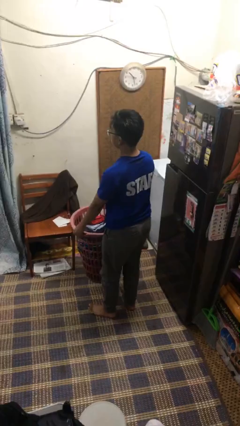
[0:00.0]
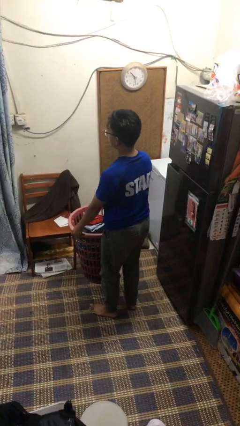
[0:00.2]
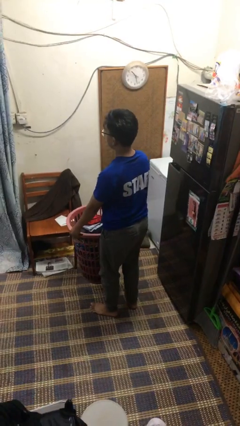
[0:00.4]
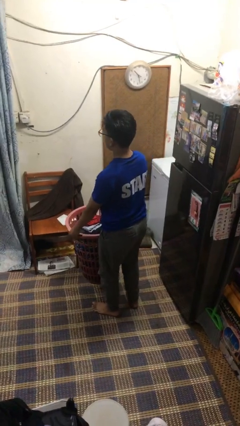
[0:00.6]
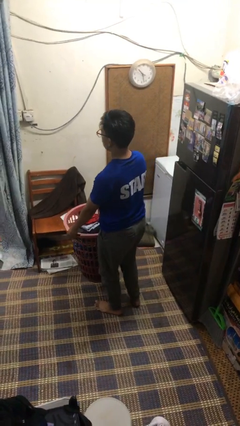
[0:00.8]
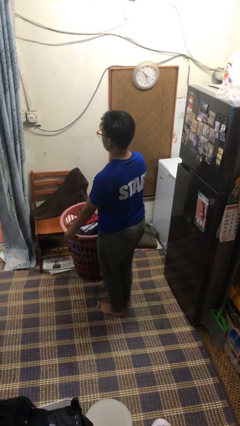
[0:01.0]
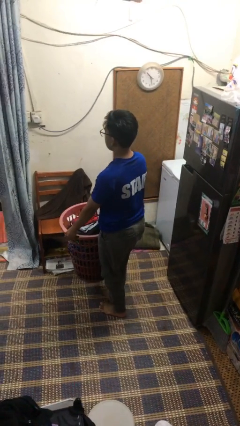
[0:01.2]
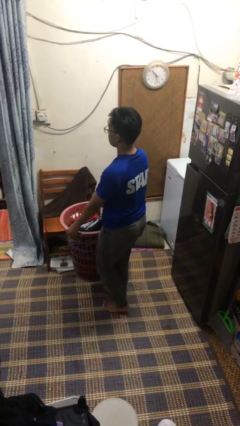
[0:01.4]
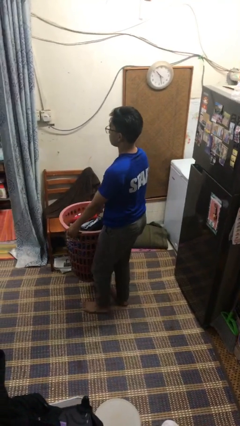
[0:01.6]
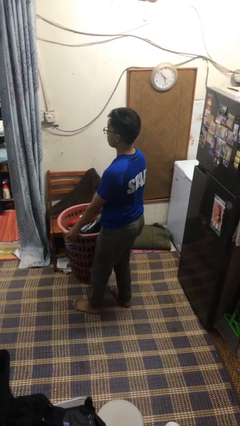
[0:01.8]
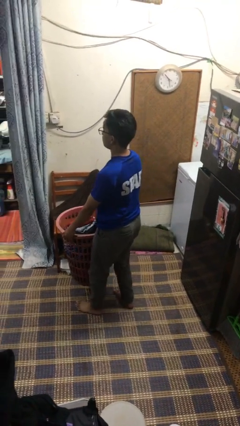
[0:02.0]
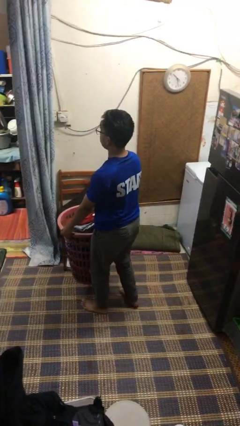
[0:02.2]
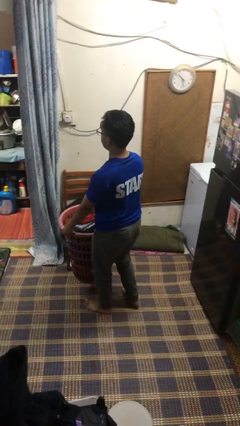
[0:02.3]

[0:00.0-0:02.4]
person carries laundry basket

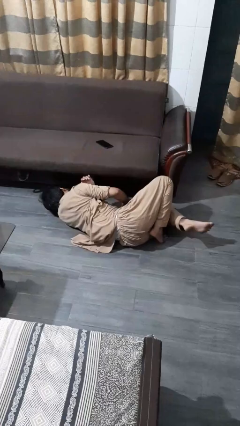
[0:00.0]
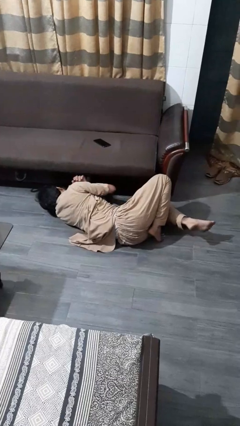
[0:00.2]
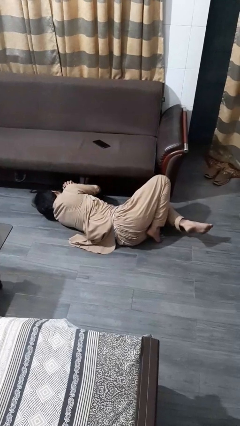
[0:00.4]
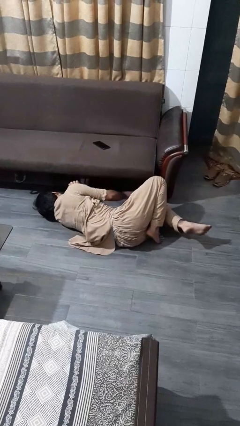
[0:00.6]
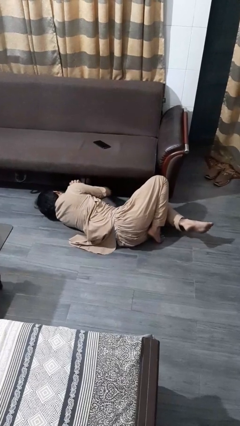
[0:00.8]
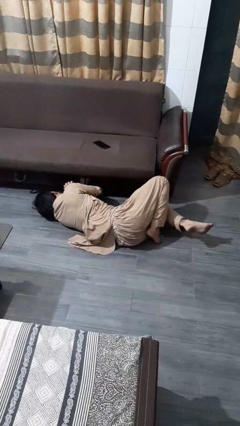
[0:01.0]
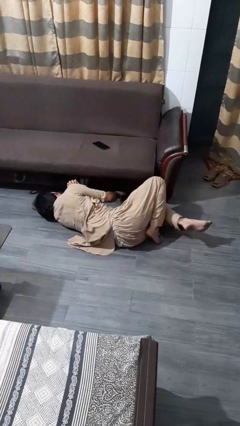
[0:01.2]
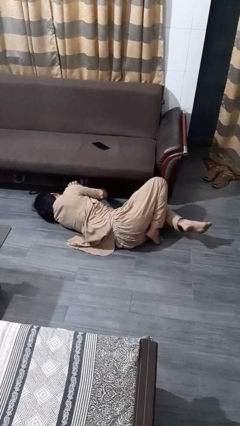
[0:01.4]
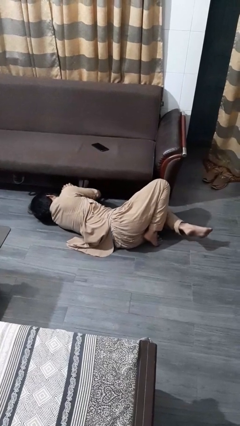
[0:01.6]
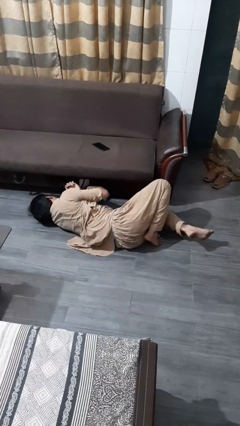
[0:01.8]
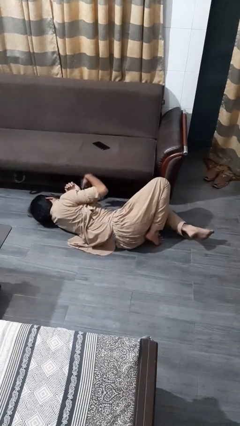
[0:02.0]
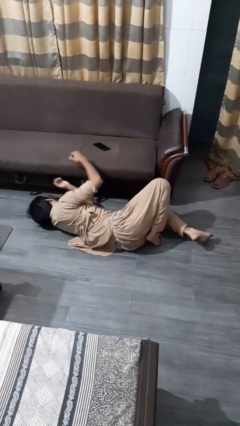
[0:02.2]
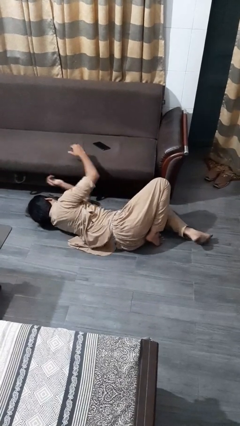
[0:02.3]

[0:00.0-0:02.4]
person searches under couch

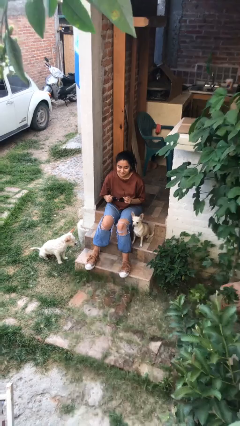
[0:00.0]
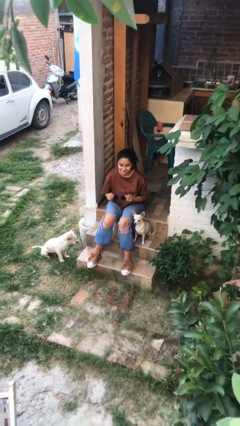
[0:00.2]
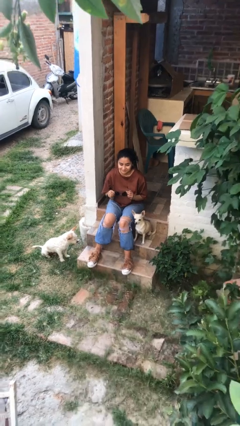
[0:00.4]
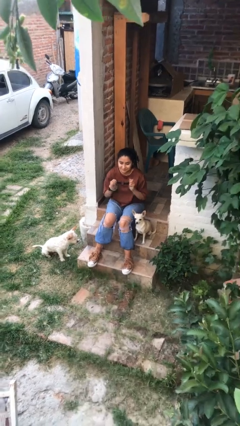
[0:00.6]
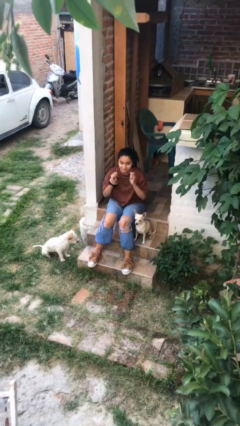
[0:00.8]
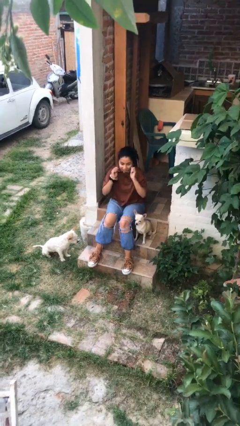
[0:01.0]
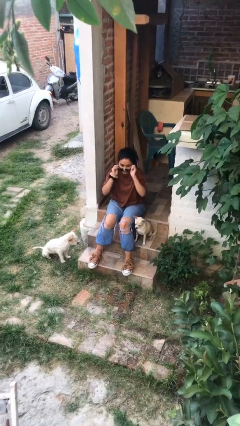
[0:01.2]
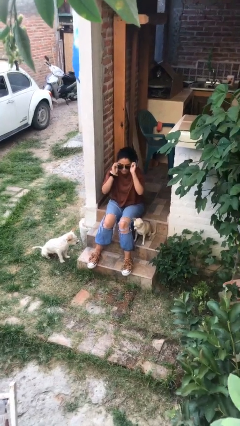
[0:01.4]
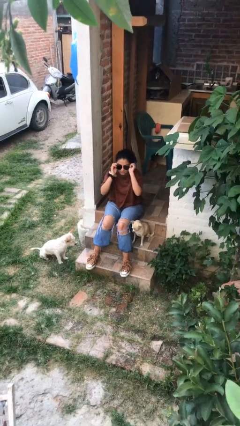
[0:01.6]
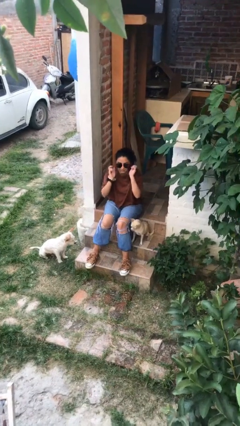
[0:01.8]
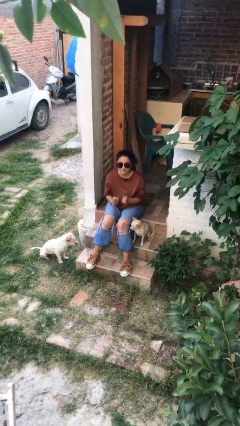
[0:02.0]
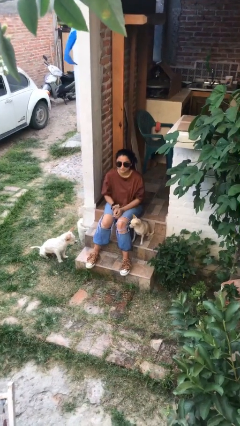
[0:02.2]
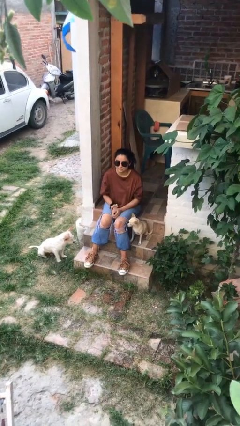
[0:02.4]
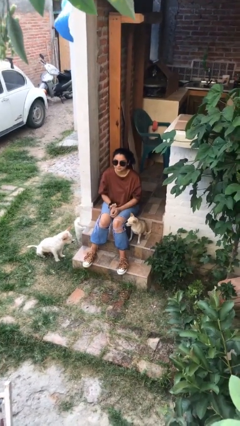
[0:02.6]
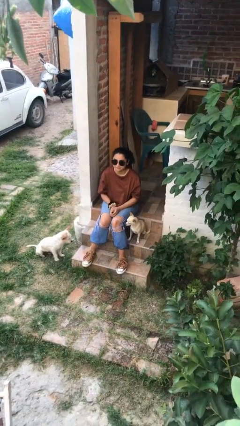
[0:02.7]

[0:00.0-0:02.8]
person puts on sunglasses

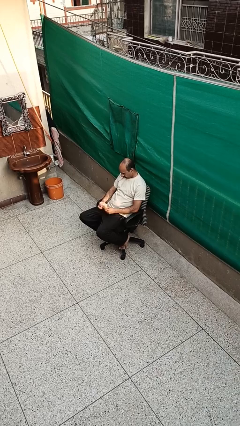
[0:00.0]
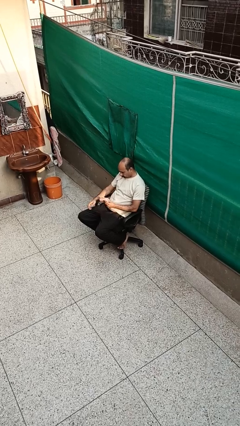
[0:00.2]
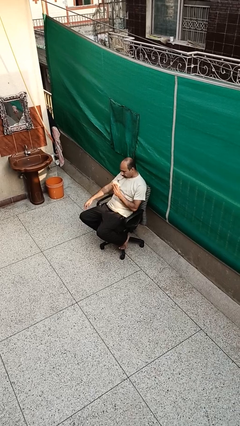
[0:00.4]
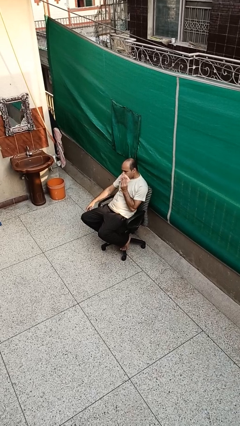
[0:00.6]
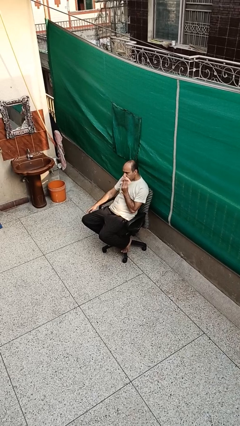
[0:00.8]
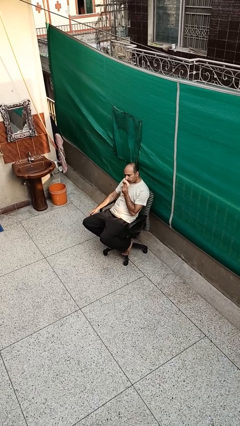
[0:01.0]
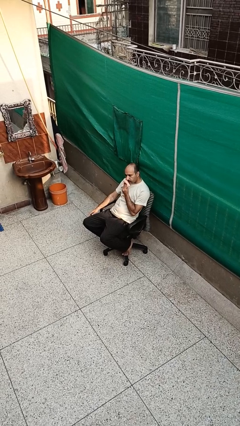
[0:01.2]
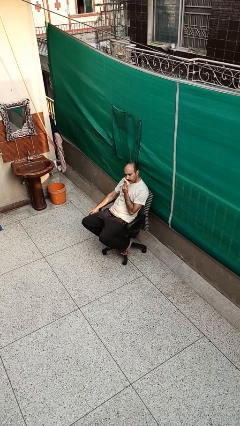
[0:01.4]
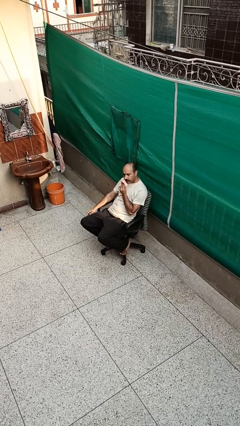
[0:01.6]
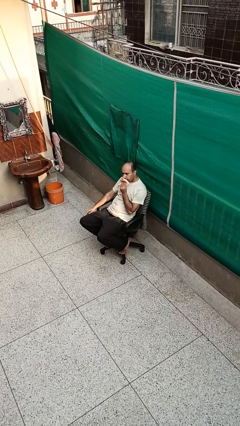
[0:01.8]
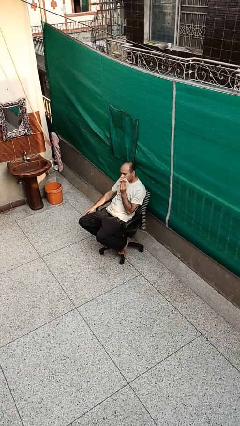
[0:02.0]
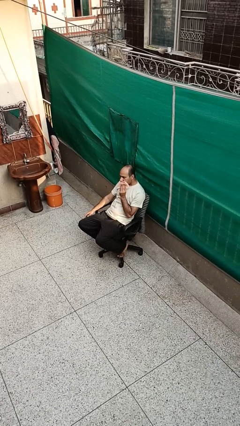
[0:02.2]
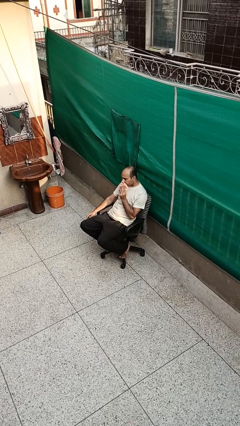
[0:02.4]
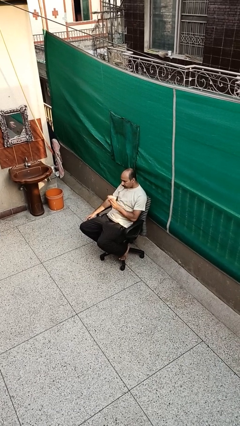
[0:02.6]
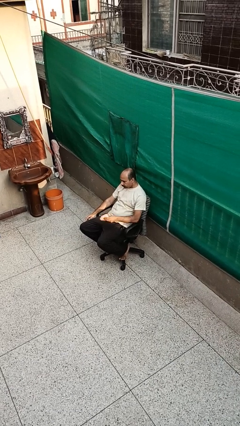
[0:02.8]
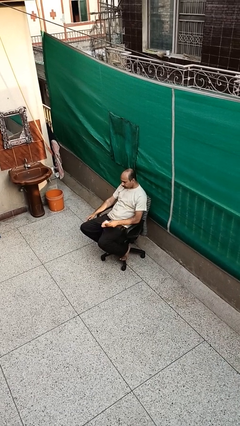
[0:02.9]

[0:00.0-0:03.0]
person wipes mouth with napkin

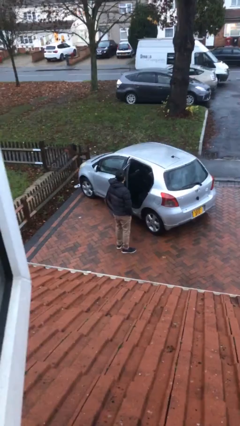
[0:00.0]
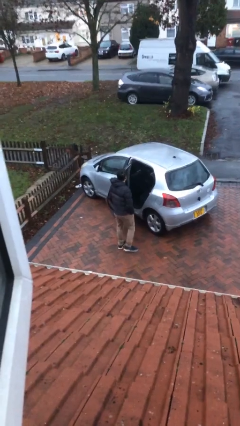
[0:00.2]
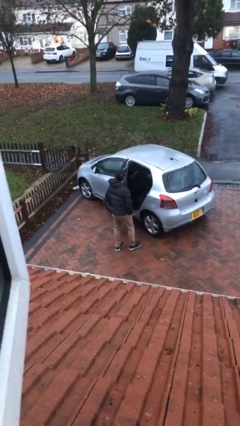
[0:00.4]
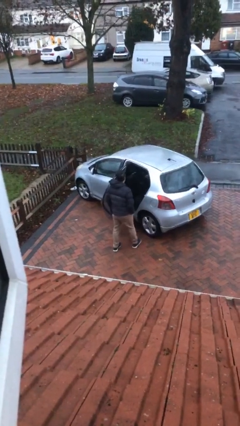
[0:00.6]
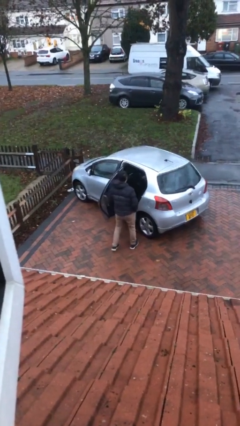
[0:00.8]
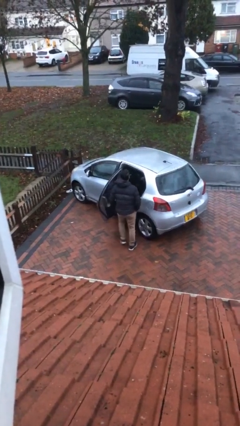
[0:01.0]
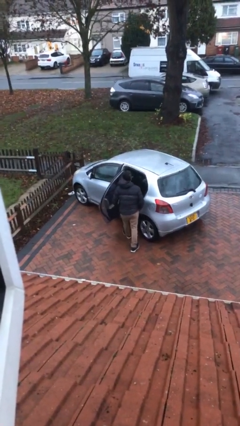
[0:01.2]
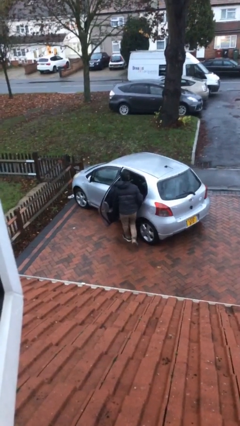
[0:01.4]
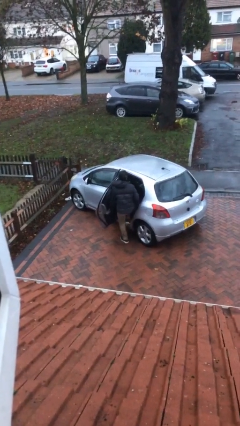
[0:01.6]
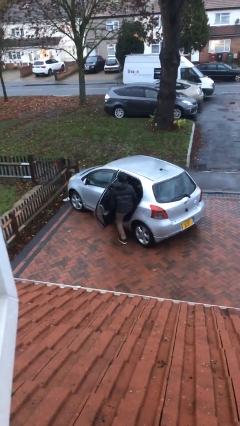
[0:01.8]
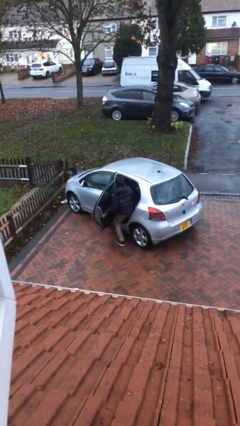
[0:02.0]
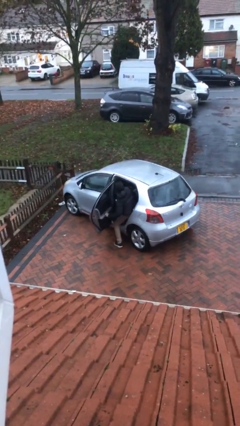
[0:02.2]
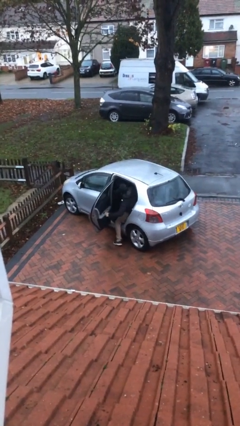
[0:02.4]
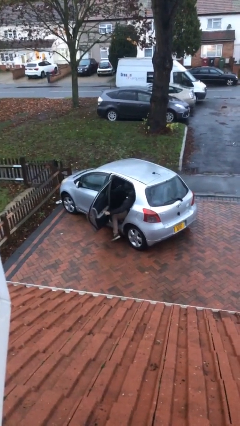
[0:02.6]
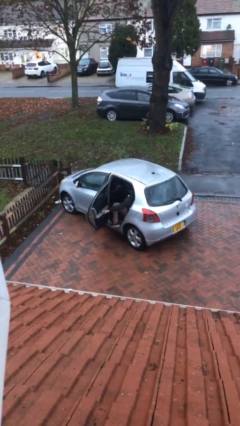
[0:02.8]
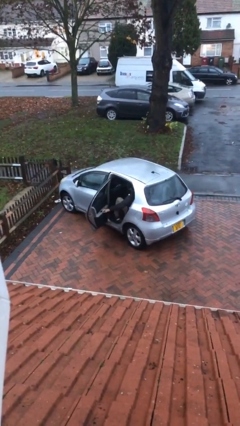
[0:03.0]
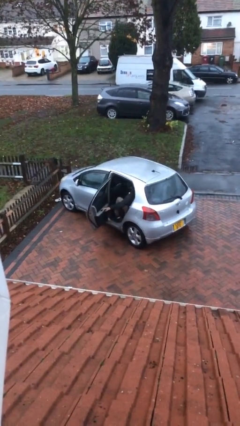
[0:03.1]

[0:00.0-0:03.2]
person enters car

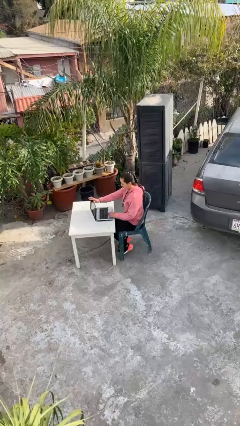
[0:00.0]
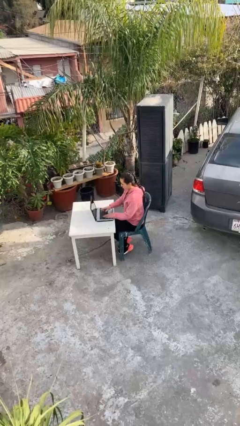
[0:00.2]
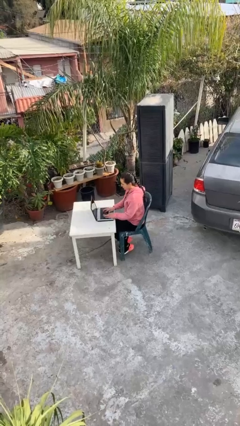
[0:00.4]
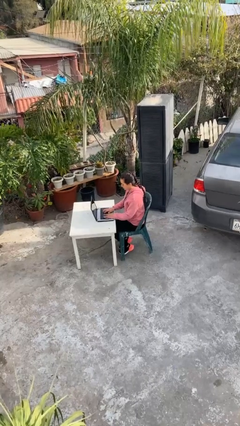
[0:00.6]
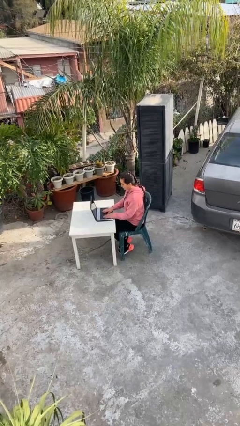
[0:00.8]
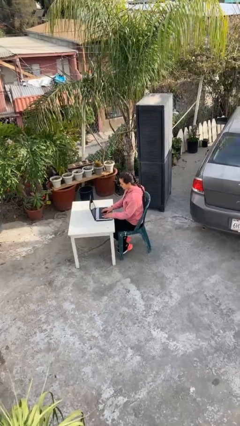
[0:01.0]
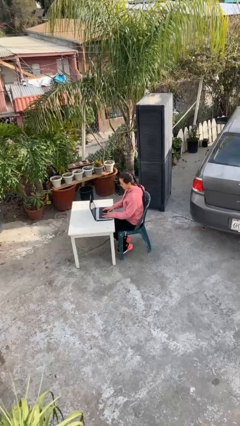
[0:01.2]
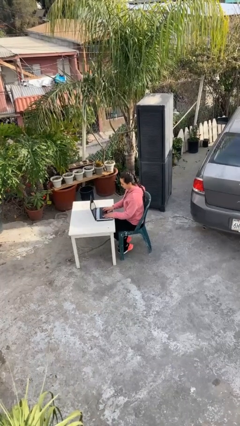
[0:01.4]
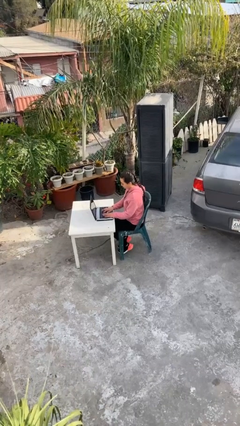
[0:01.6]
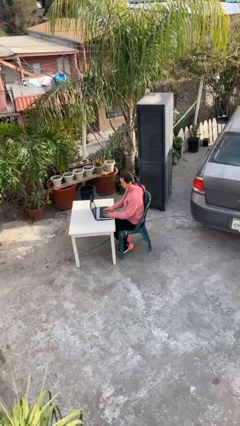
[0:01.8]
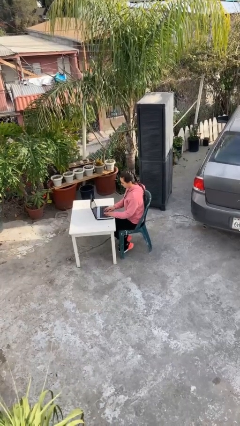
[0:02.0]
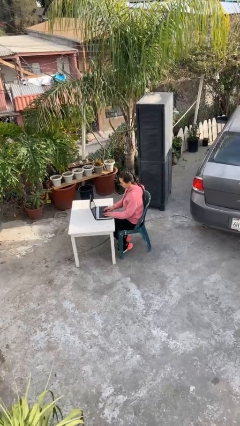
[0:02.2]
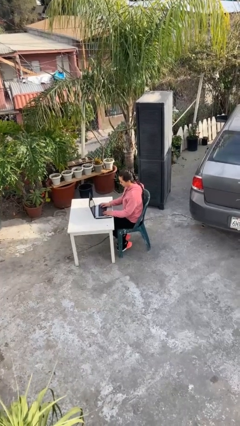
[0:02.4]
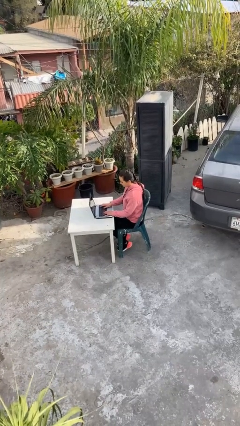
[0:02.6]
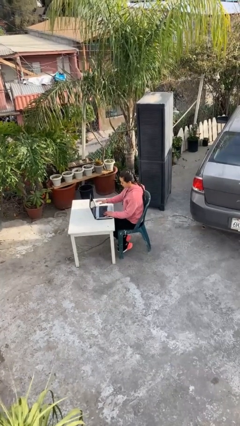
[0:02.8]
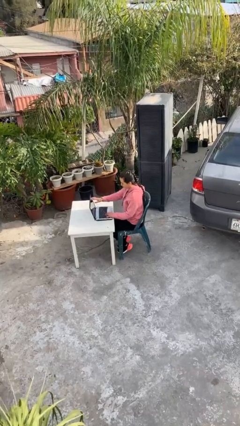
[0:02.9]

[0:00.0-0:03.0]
person interacts with laptop

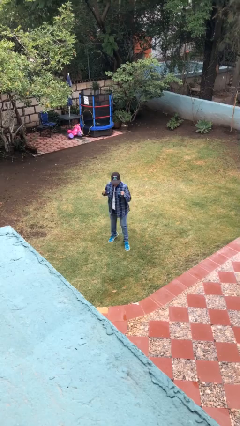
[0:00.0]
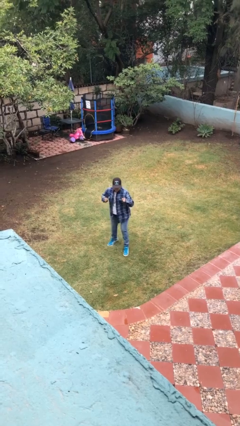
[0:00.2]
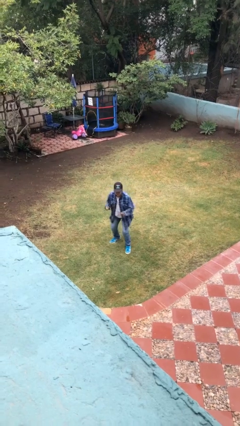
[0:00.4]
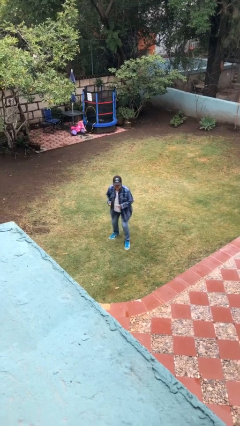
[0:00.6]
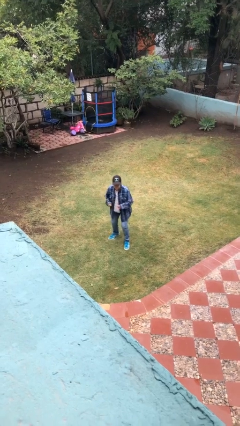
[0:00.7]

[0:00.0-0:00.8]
person jumps
